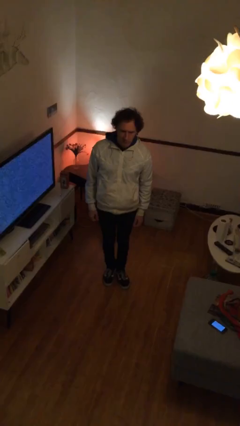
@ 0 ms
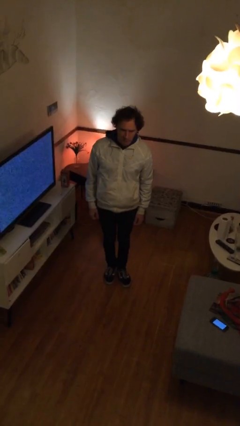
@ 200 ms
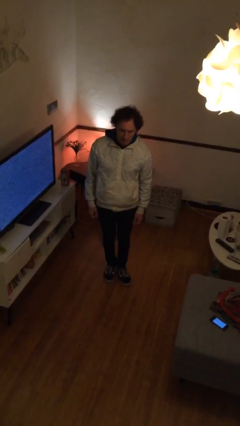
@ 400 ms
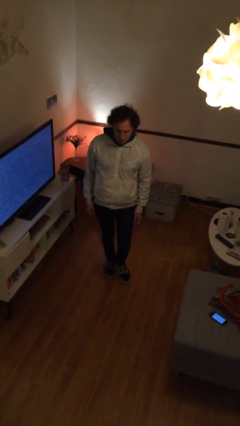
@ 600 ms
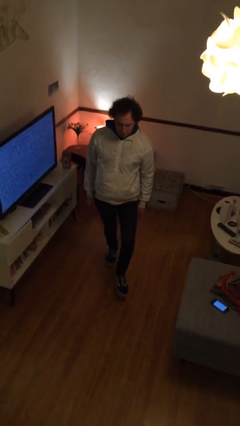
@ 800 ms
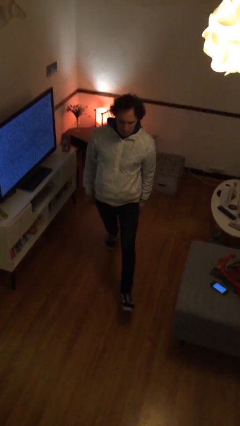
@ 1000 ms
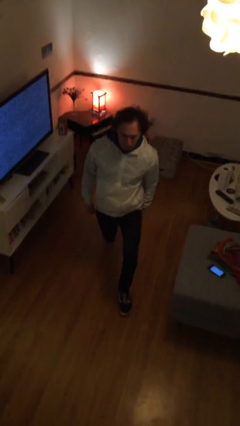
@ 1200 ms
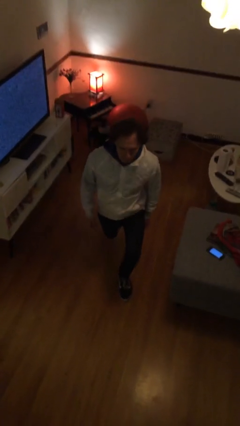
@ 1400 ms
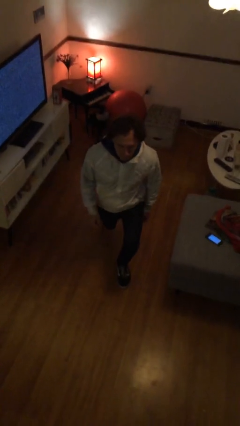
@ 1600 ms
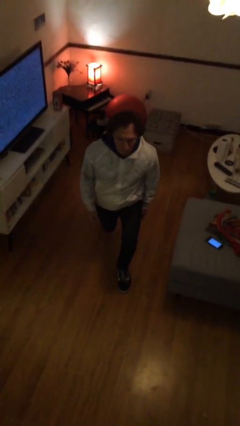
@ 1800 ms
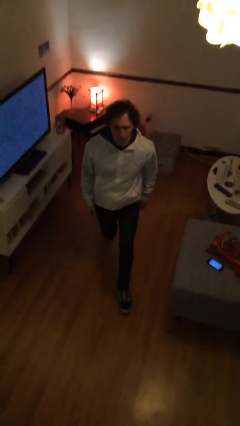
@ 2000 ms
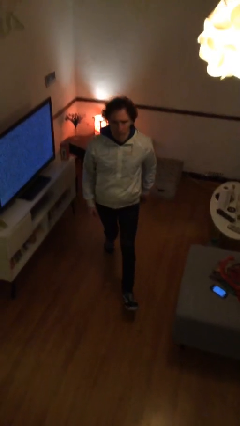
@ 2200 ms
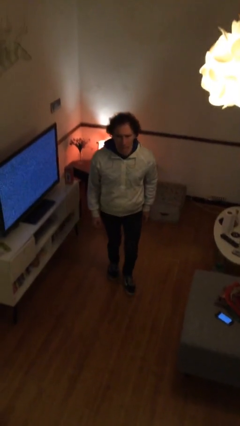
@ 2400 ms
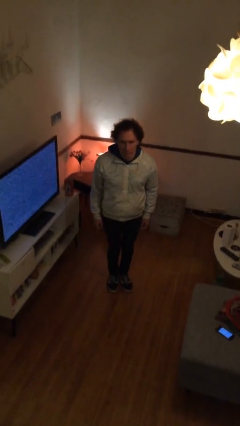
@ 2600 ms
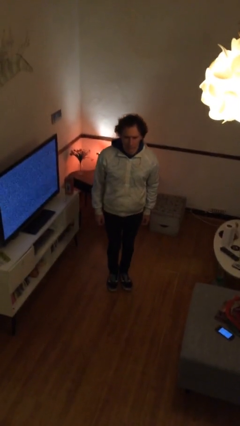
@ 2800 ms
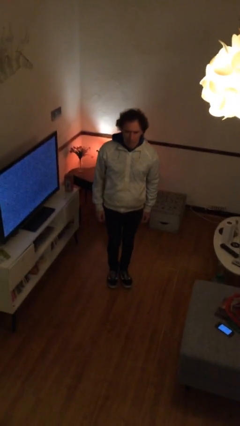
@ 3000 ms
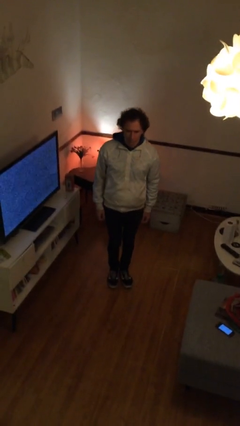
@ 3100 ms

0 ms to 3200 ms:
person exercises with lunges

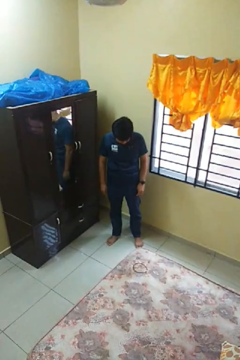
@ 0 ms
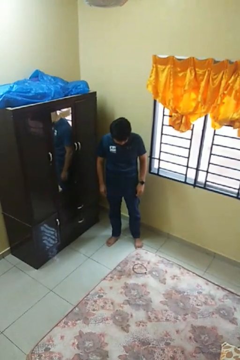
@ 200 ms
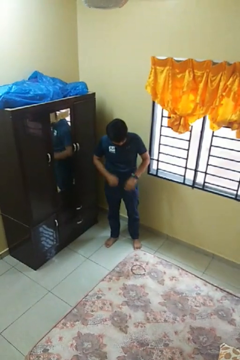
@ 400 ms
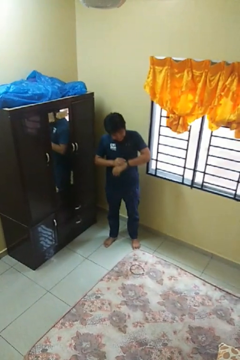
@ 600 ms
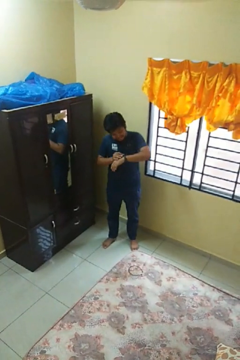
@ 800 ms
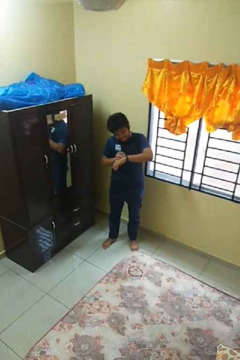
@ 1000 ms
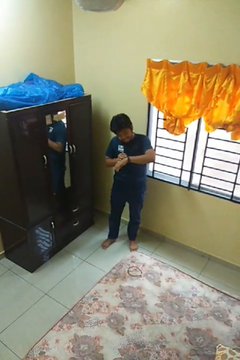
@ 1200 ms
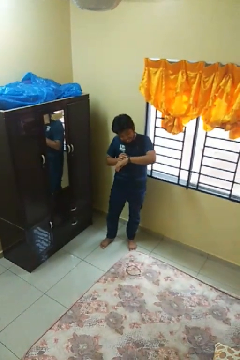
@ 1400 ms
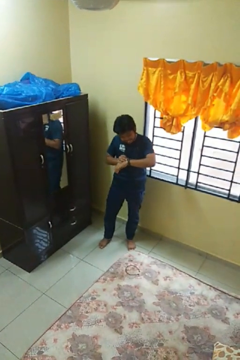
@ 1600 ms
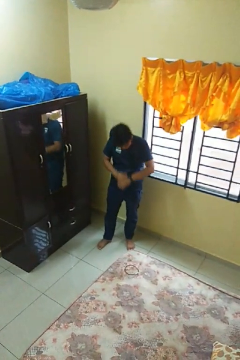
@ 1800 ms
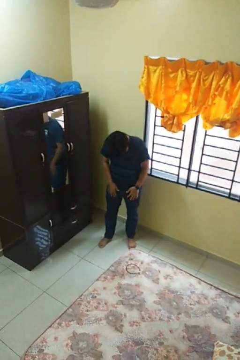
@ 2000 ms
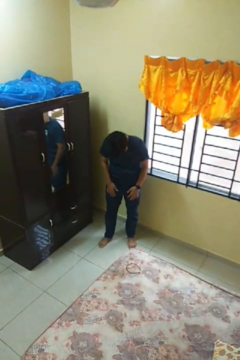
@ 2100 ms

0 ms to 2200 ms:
person looks at wristwatch

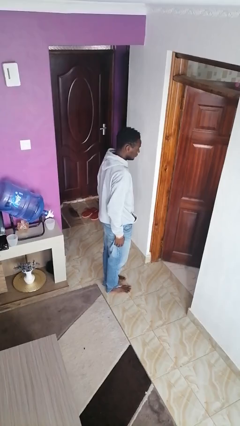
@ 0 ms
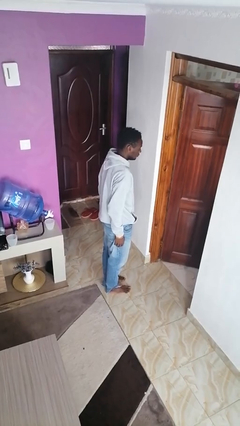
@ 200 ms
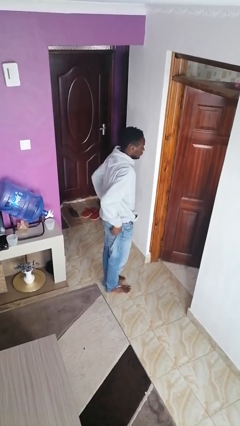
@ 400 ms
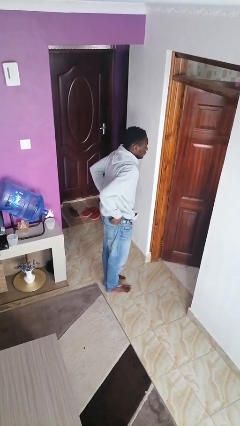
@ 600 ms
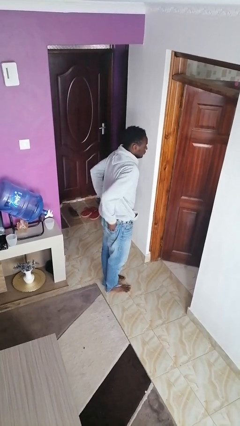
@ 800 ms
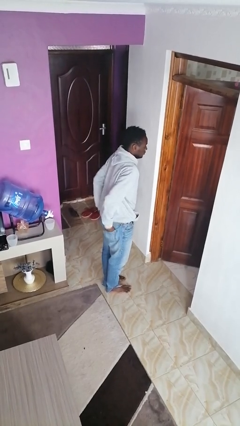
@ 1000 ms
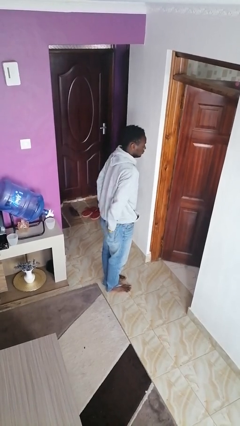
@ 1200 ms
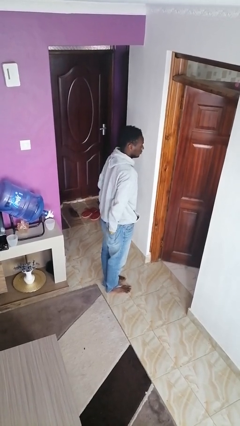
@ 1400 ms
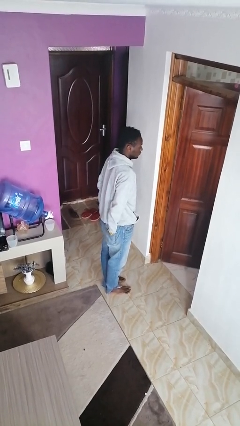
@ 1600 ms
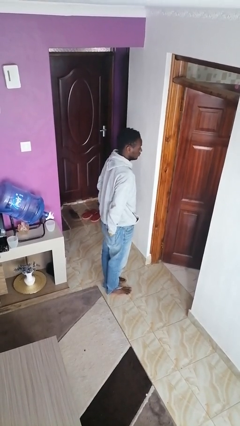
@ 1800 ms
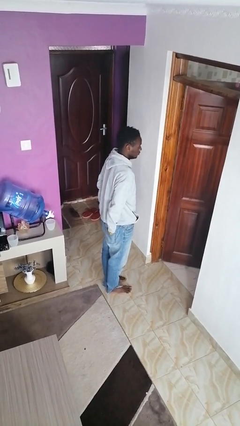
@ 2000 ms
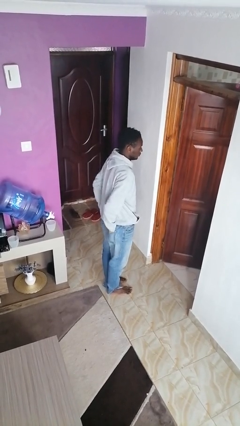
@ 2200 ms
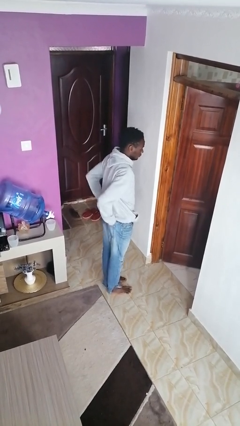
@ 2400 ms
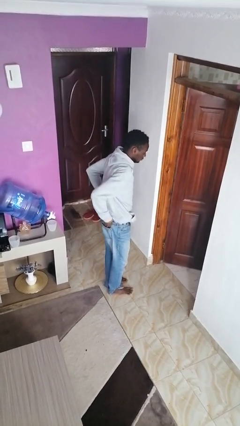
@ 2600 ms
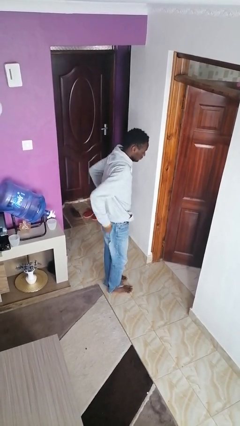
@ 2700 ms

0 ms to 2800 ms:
person puts hands in back pockets

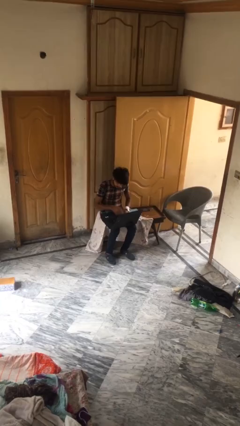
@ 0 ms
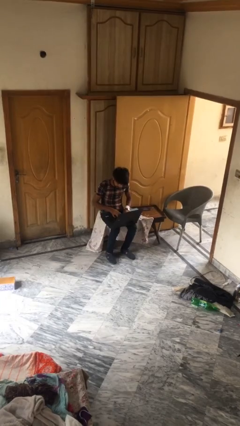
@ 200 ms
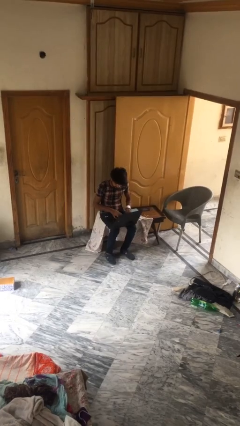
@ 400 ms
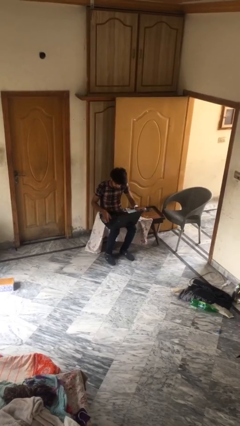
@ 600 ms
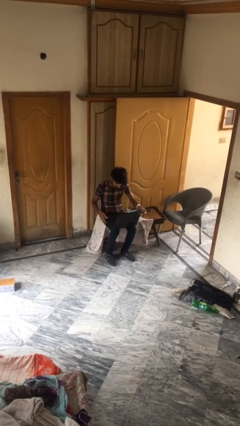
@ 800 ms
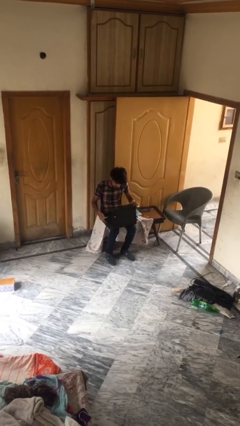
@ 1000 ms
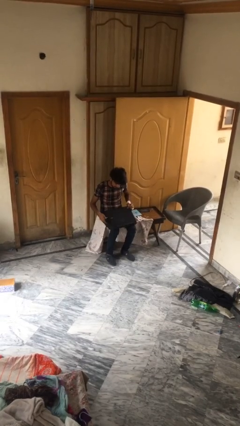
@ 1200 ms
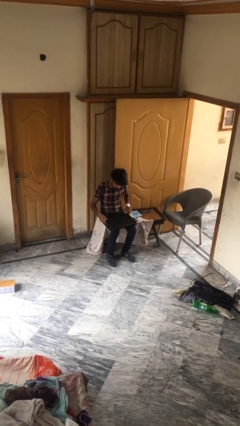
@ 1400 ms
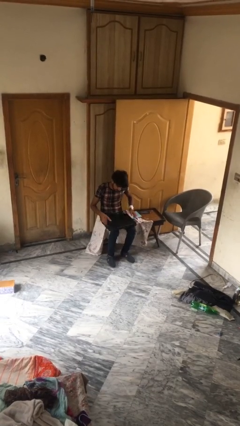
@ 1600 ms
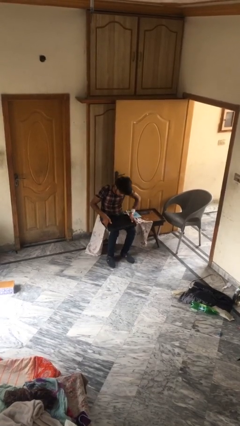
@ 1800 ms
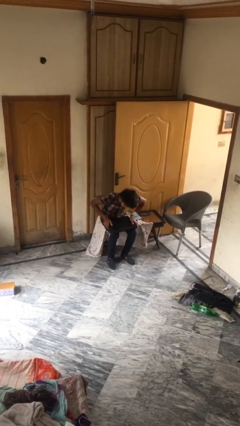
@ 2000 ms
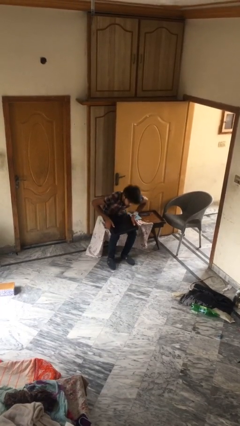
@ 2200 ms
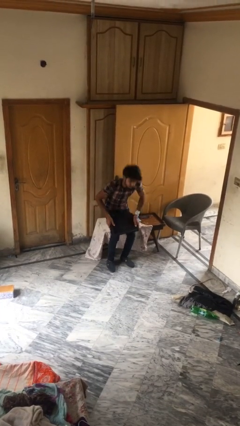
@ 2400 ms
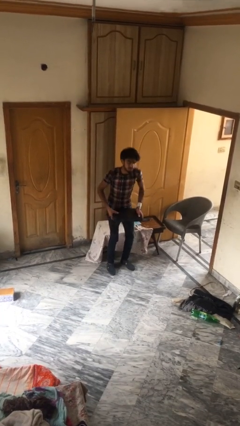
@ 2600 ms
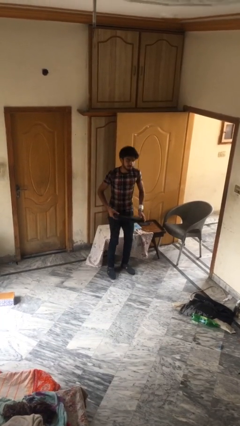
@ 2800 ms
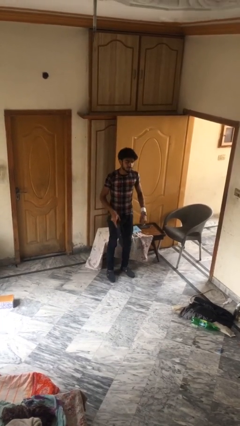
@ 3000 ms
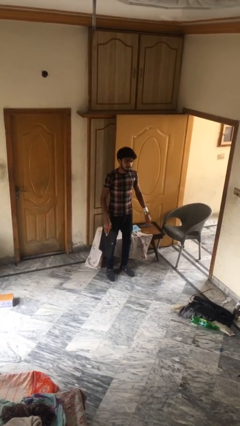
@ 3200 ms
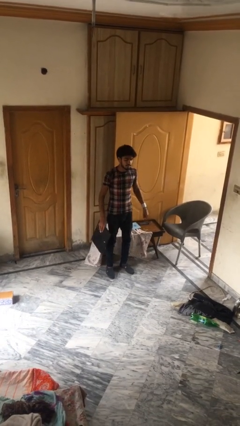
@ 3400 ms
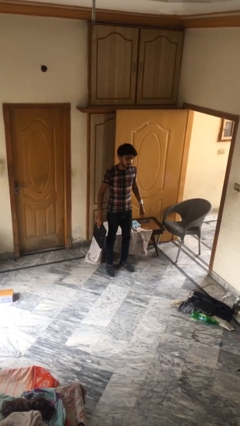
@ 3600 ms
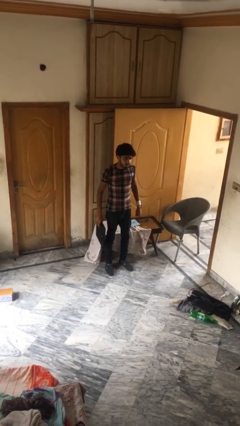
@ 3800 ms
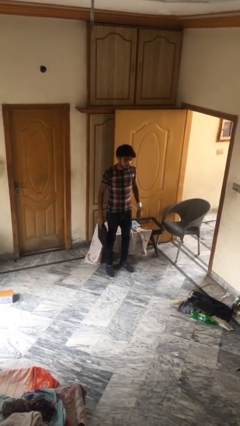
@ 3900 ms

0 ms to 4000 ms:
person stands up

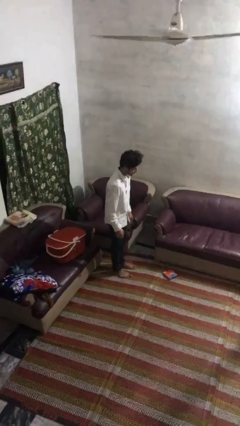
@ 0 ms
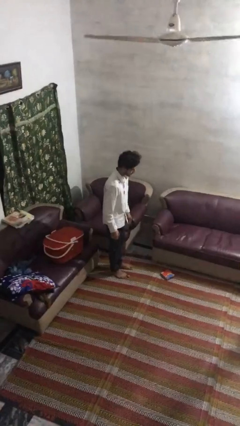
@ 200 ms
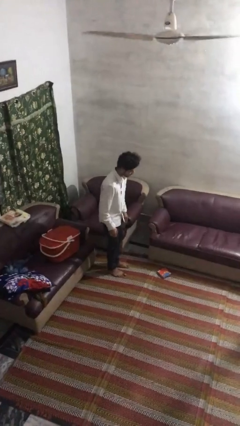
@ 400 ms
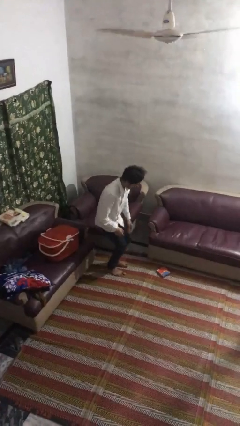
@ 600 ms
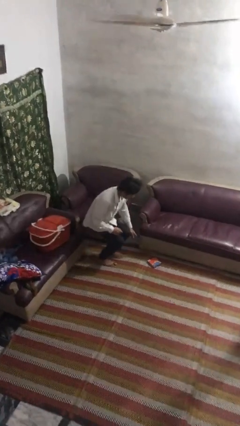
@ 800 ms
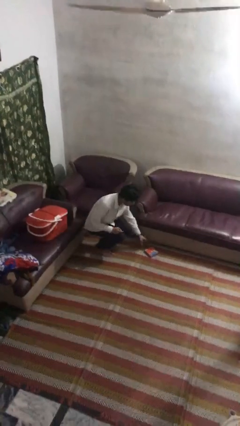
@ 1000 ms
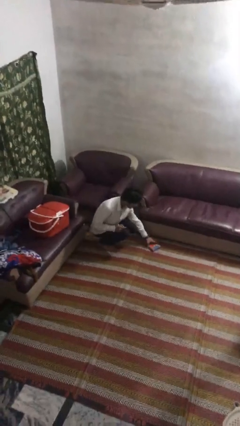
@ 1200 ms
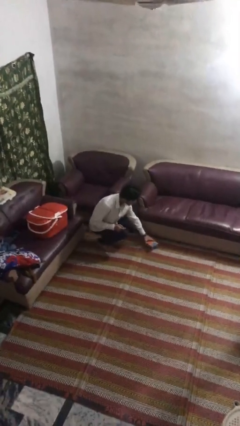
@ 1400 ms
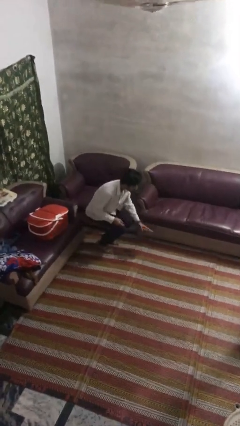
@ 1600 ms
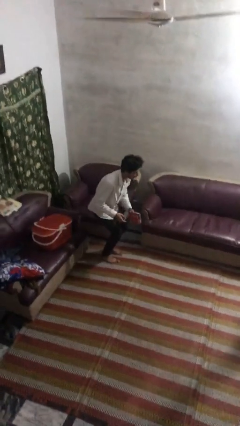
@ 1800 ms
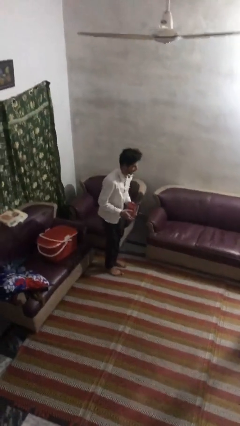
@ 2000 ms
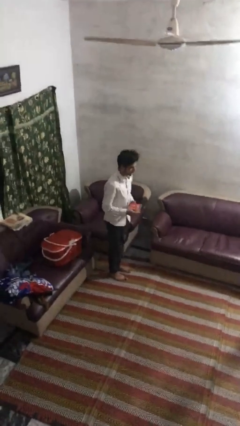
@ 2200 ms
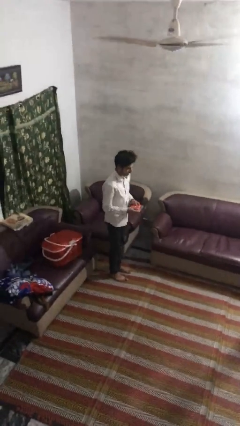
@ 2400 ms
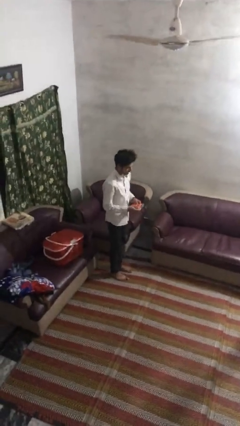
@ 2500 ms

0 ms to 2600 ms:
person picks up object from floor

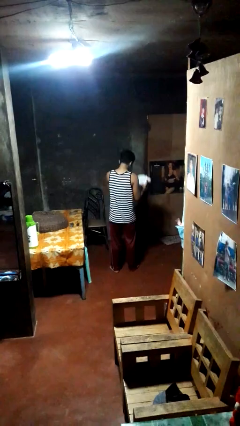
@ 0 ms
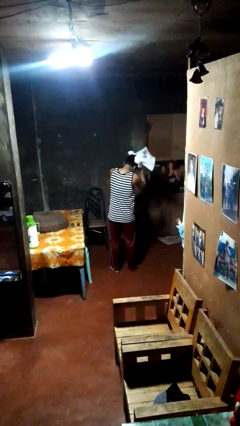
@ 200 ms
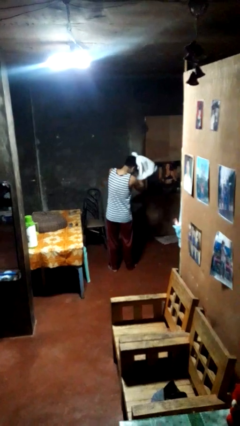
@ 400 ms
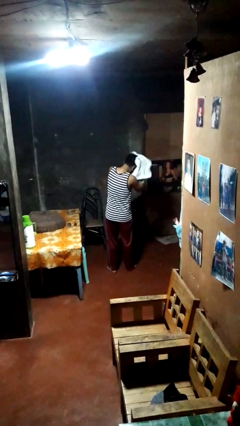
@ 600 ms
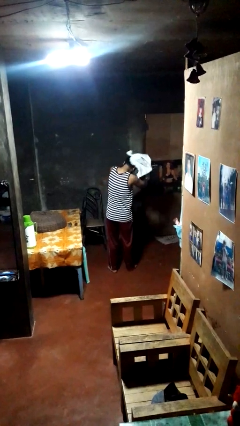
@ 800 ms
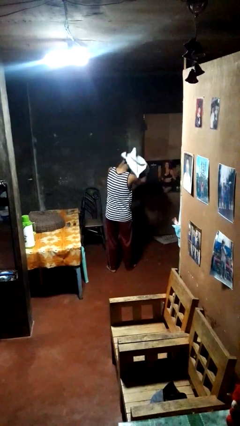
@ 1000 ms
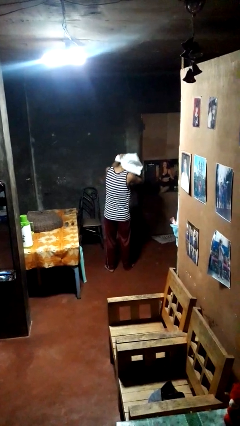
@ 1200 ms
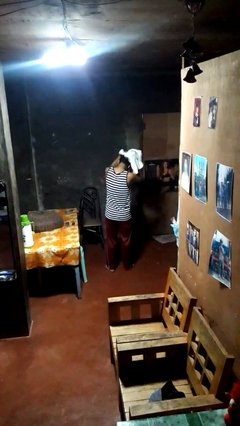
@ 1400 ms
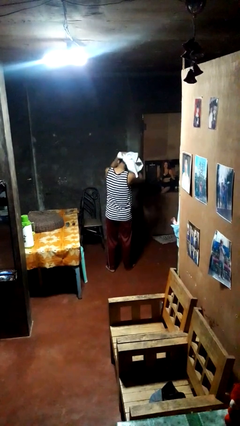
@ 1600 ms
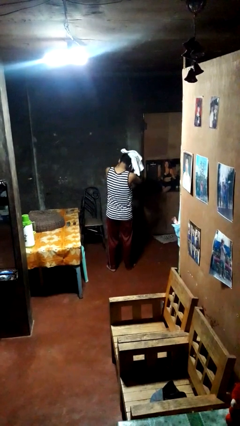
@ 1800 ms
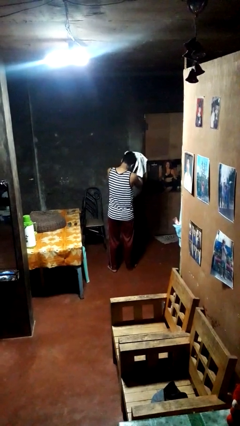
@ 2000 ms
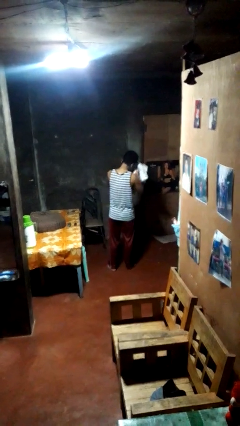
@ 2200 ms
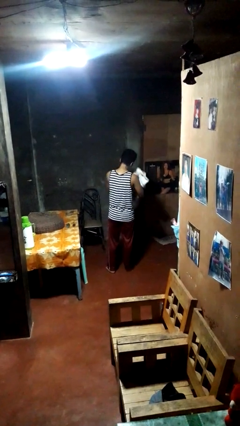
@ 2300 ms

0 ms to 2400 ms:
person dries hair with towel

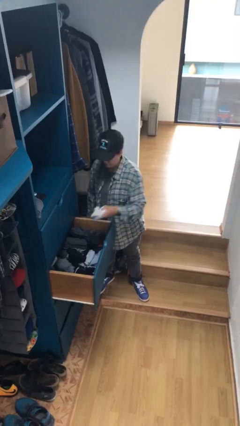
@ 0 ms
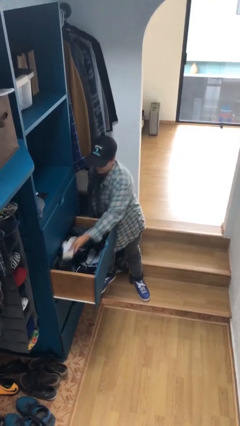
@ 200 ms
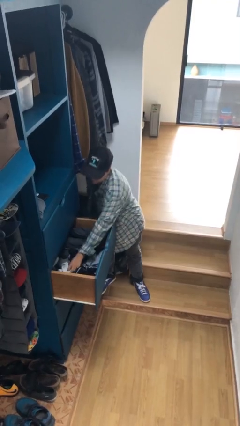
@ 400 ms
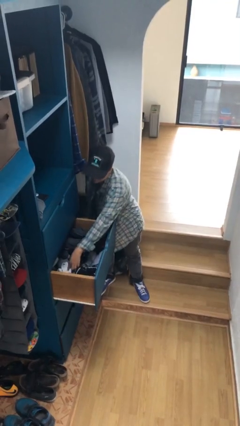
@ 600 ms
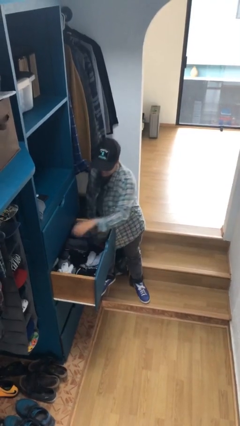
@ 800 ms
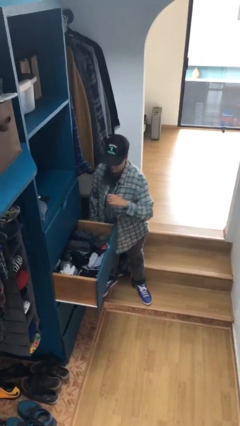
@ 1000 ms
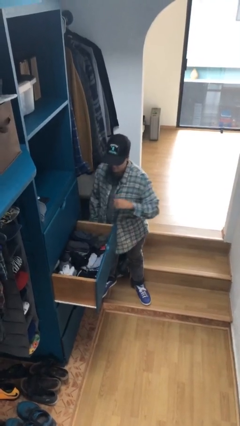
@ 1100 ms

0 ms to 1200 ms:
person puts clothes into dresser
